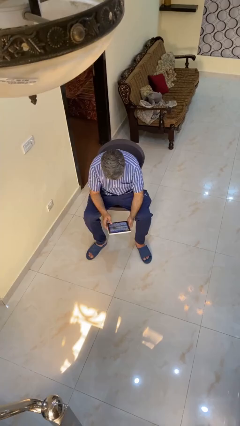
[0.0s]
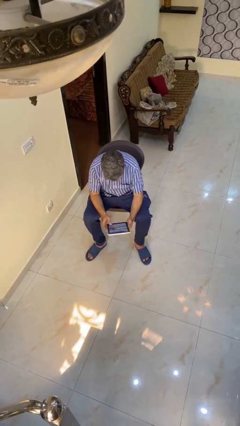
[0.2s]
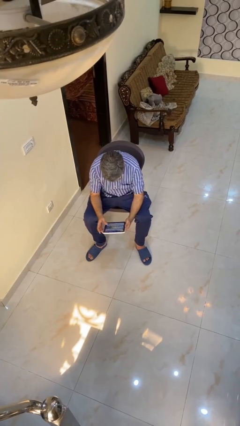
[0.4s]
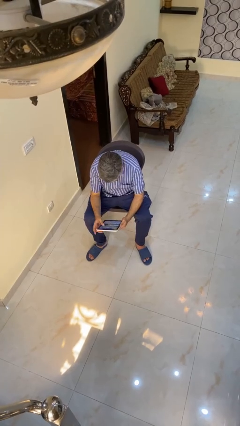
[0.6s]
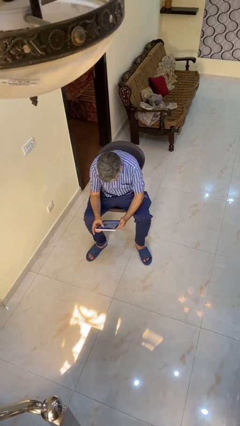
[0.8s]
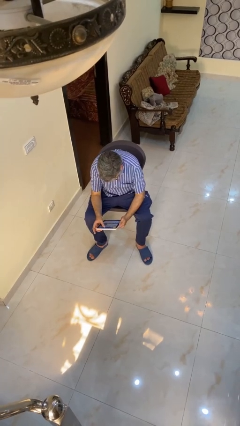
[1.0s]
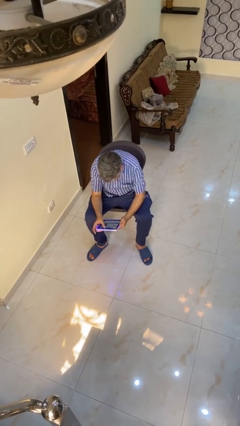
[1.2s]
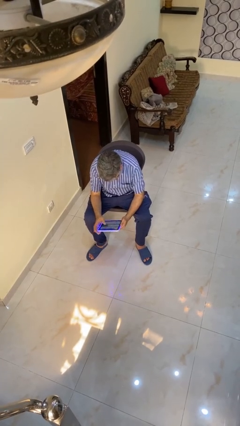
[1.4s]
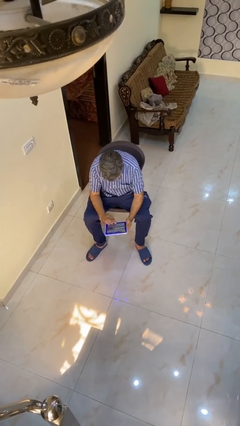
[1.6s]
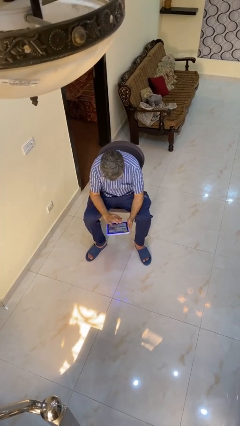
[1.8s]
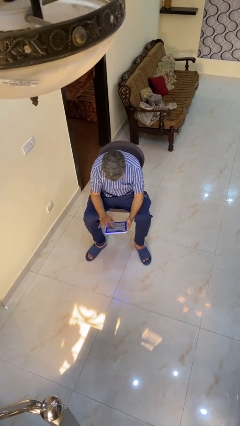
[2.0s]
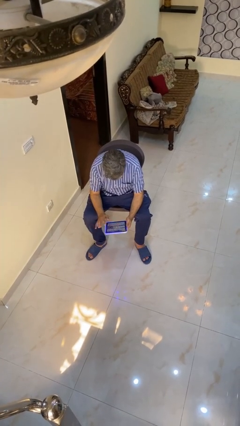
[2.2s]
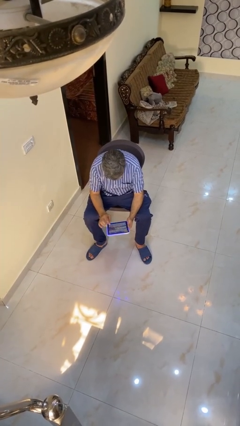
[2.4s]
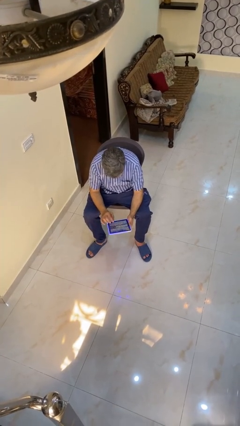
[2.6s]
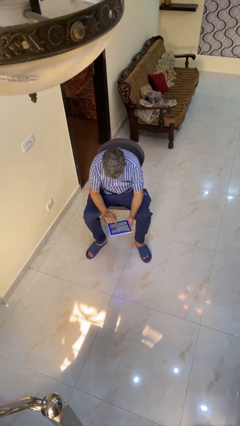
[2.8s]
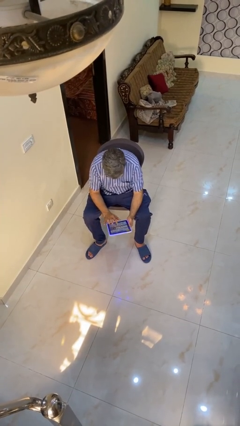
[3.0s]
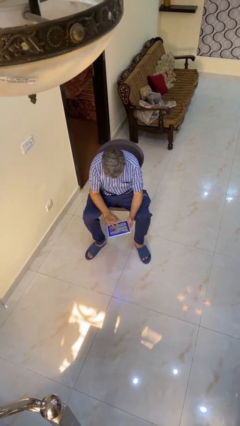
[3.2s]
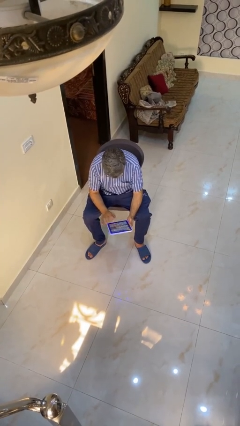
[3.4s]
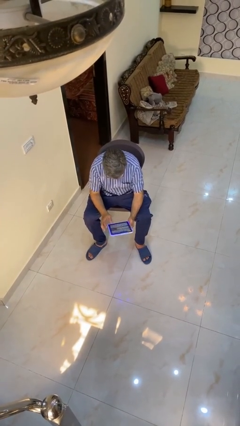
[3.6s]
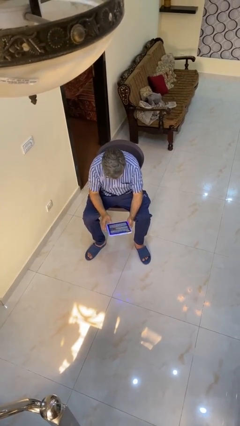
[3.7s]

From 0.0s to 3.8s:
person interacts with tablet

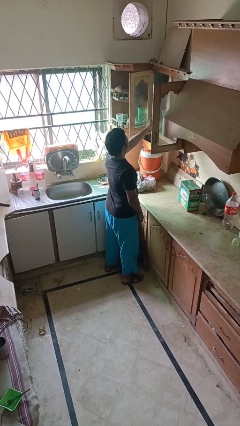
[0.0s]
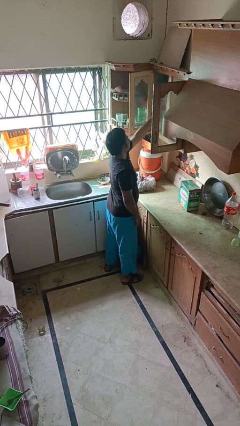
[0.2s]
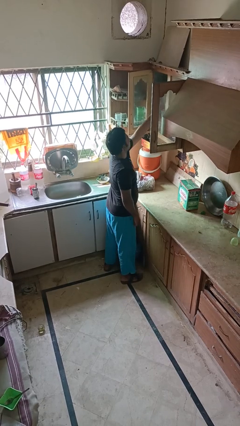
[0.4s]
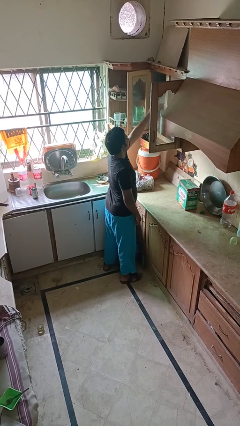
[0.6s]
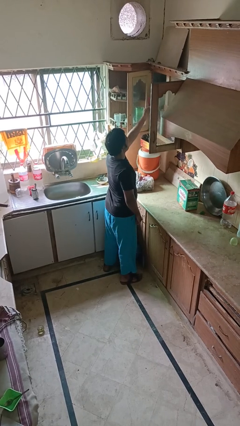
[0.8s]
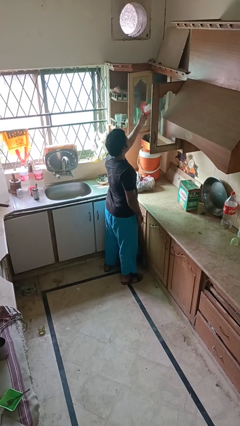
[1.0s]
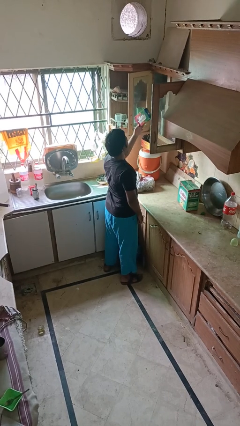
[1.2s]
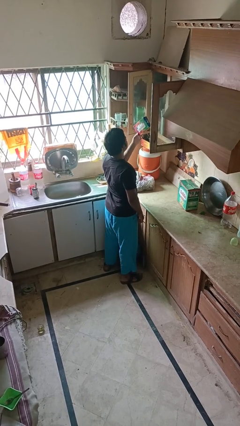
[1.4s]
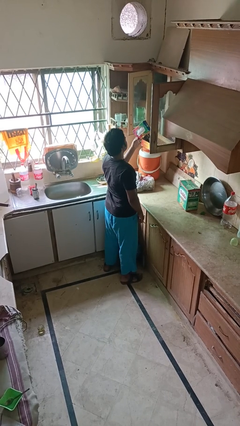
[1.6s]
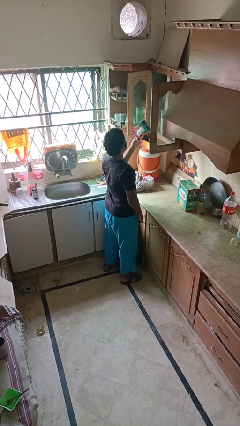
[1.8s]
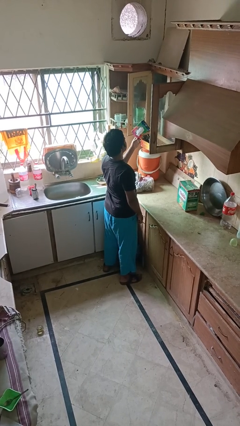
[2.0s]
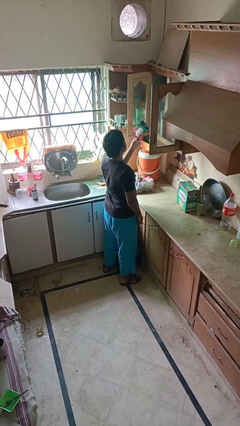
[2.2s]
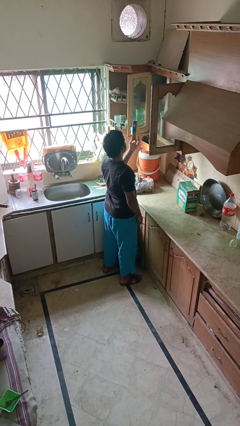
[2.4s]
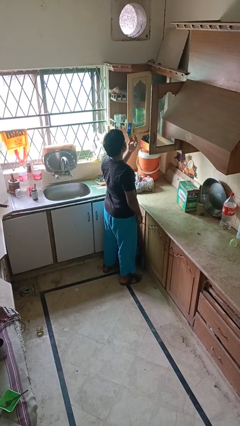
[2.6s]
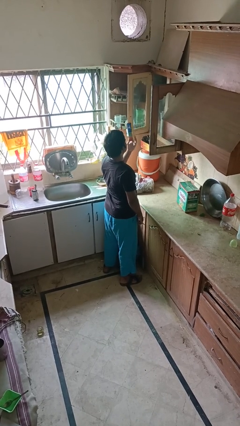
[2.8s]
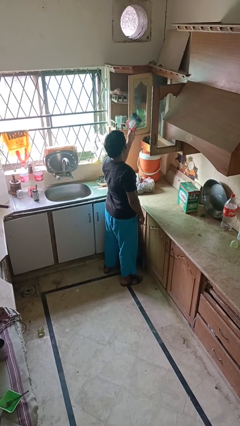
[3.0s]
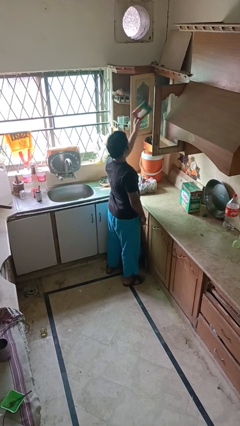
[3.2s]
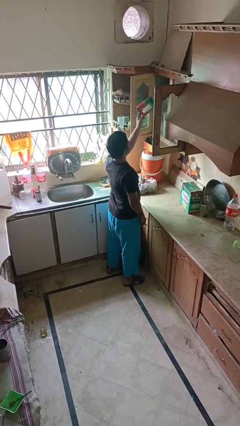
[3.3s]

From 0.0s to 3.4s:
person picks up object from cabinet

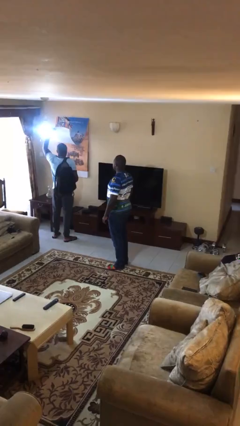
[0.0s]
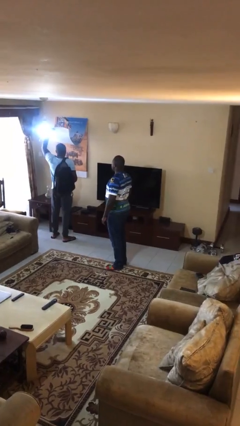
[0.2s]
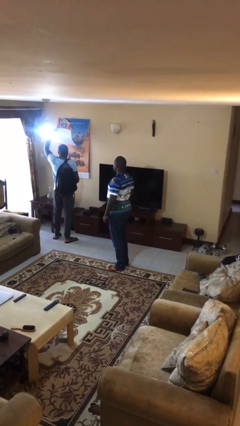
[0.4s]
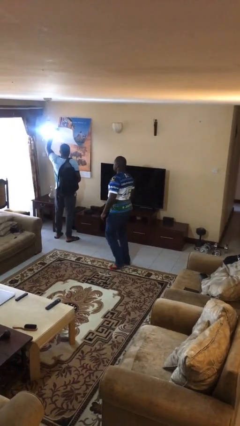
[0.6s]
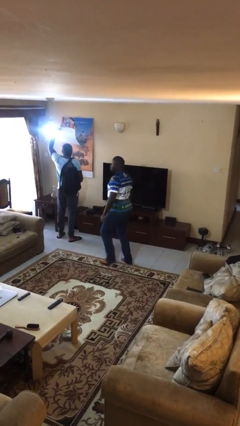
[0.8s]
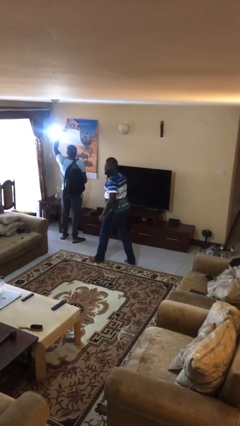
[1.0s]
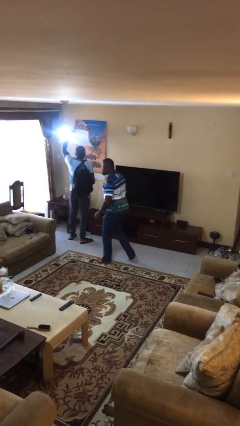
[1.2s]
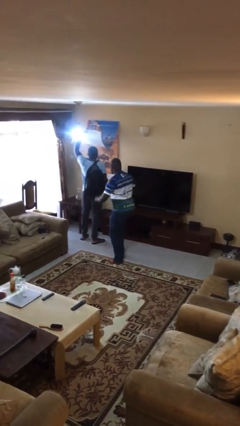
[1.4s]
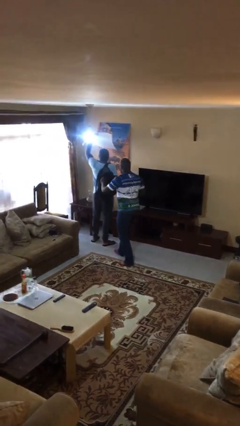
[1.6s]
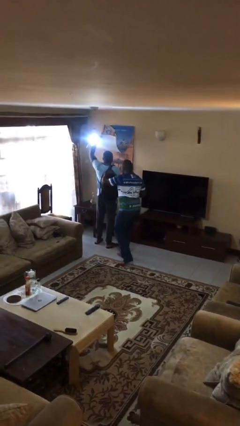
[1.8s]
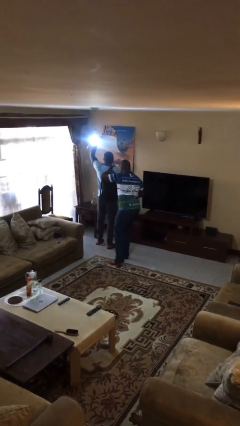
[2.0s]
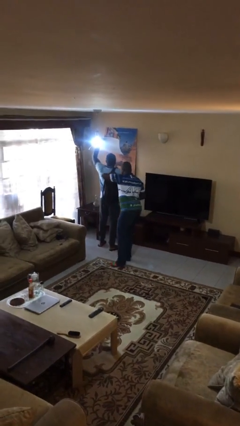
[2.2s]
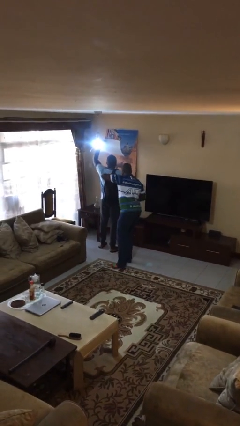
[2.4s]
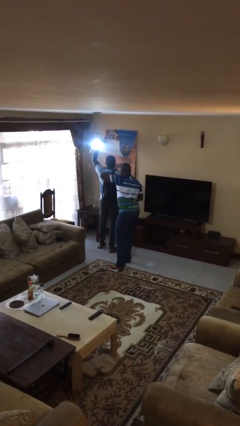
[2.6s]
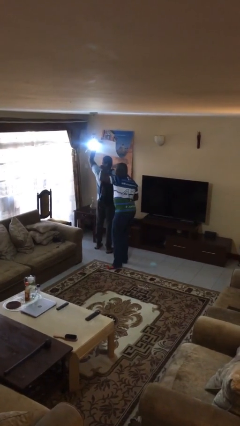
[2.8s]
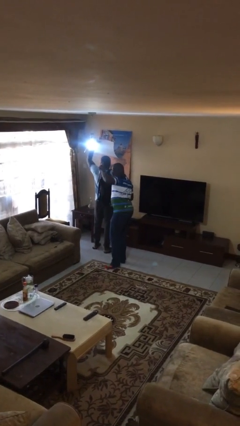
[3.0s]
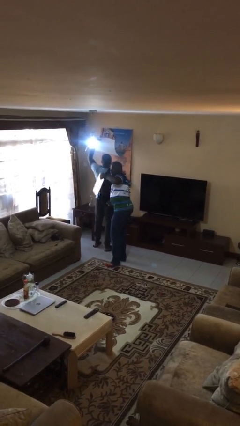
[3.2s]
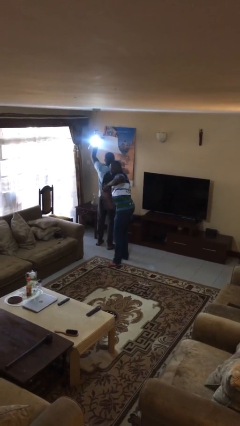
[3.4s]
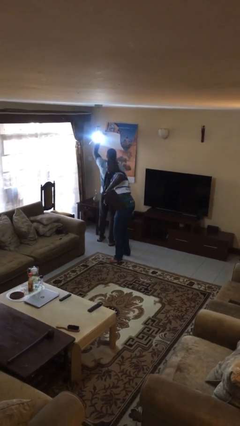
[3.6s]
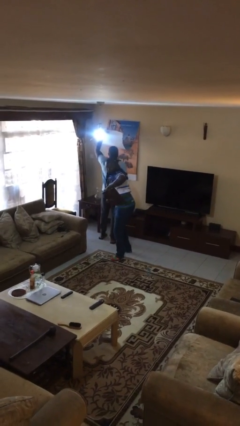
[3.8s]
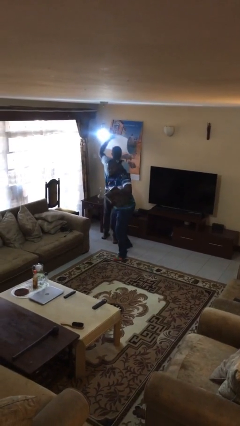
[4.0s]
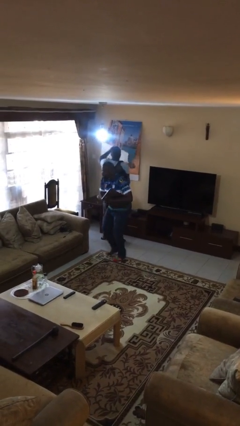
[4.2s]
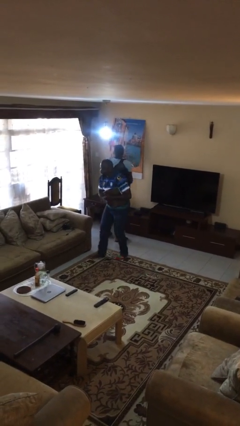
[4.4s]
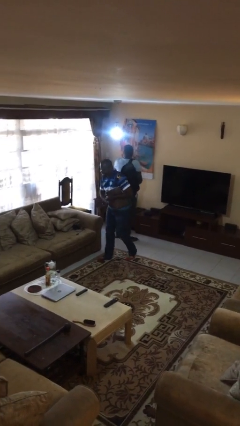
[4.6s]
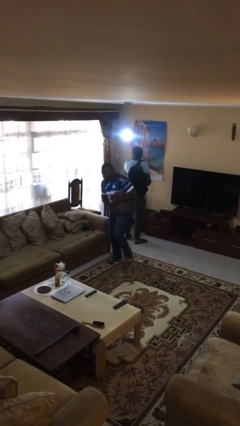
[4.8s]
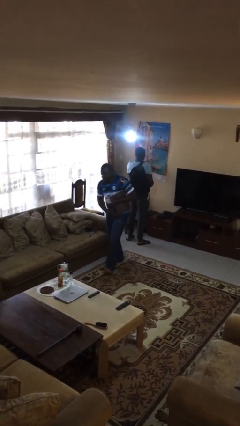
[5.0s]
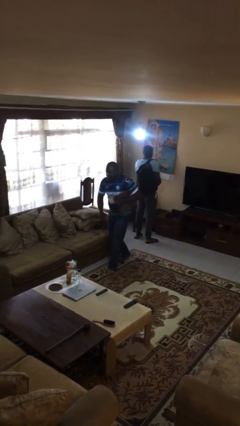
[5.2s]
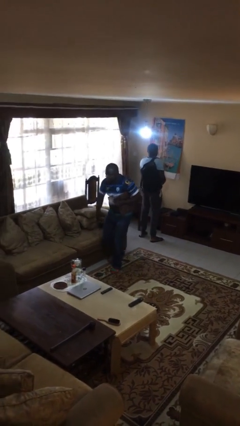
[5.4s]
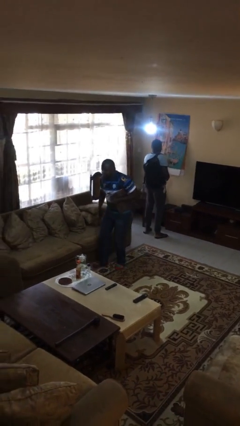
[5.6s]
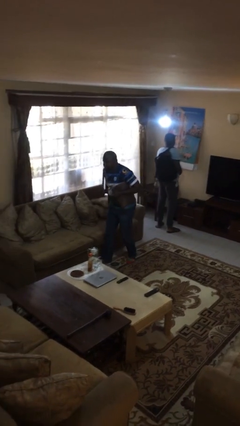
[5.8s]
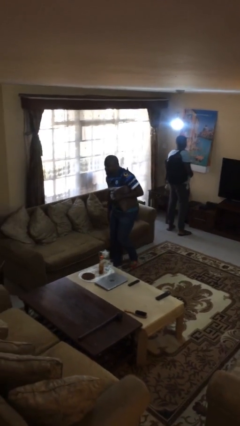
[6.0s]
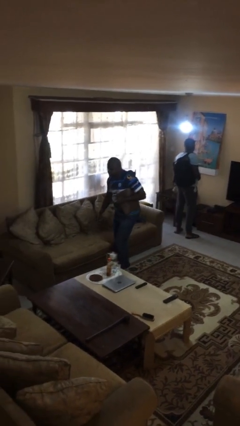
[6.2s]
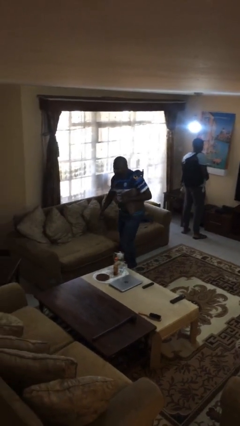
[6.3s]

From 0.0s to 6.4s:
person steals object from person

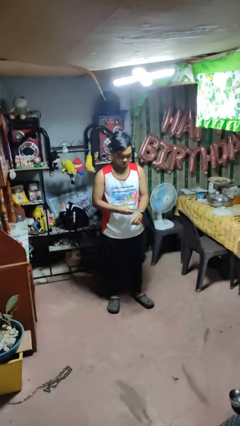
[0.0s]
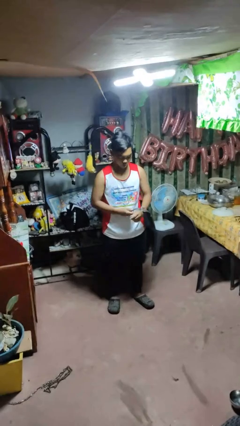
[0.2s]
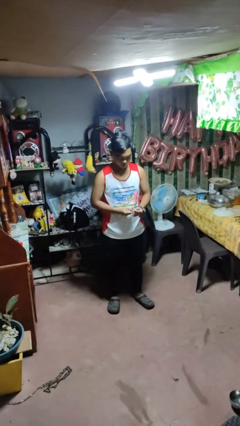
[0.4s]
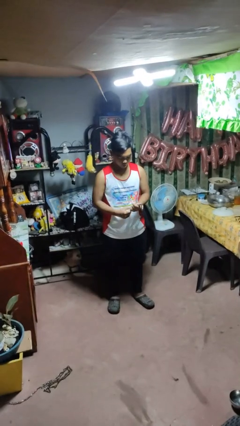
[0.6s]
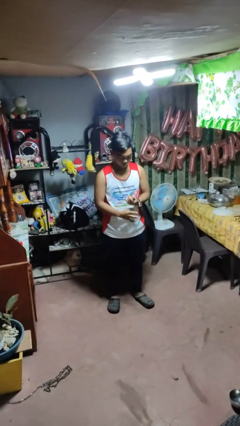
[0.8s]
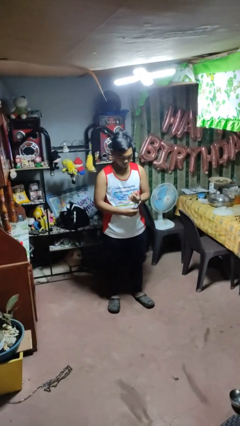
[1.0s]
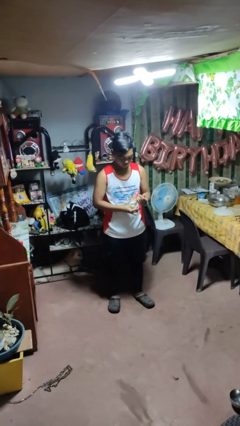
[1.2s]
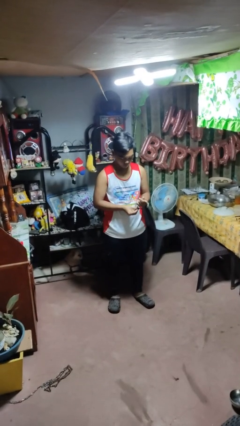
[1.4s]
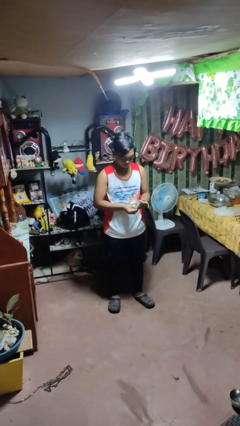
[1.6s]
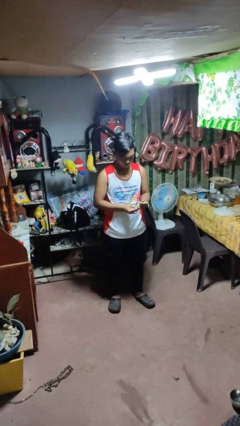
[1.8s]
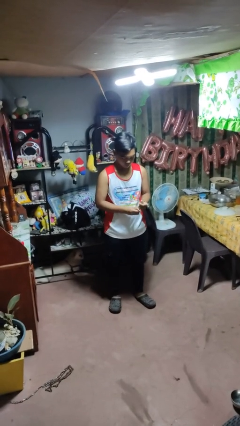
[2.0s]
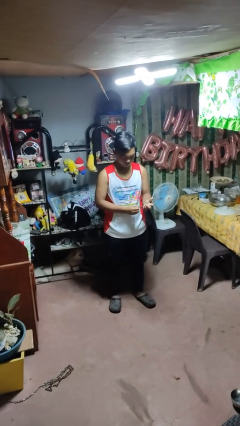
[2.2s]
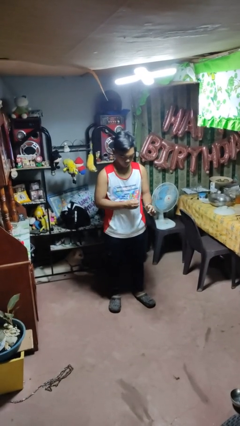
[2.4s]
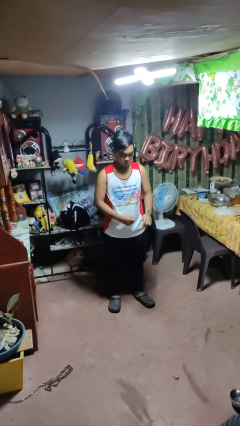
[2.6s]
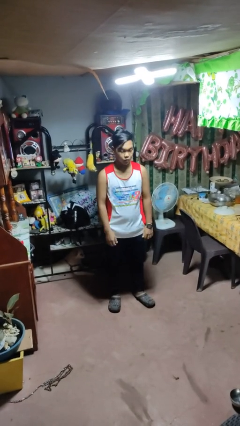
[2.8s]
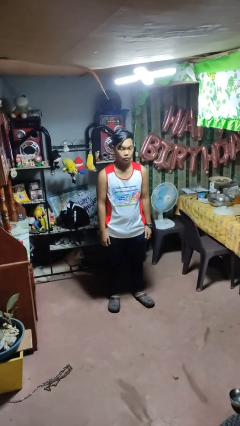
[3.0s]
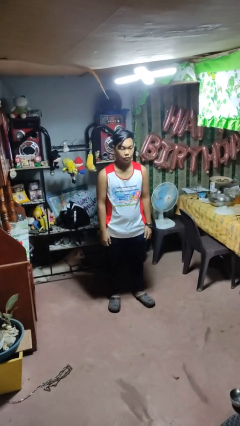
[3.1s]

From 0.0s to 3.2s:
person puts on wristwatch

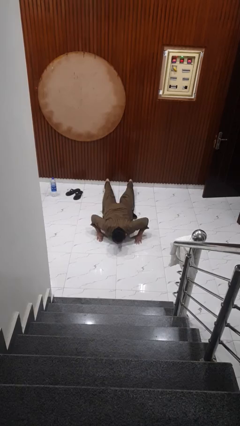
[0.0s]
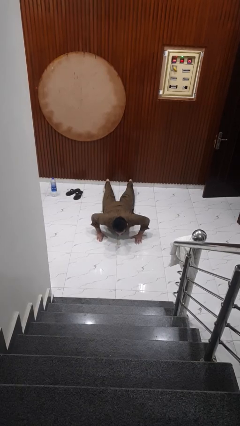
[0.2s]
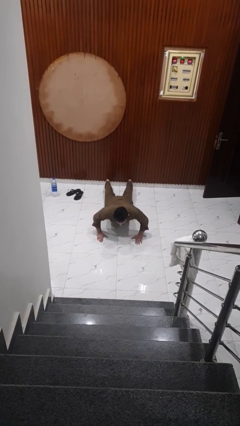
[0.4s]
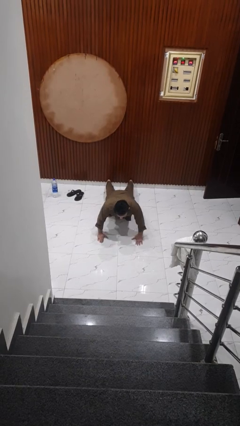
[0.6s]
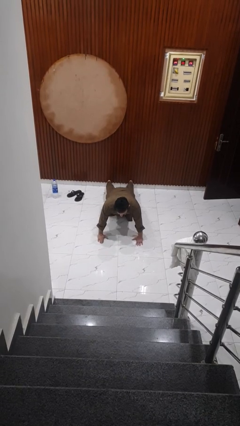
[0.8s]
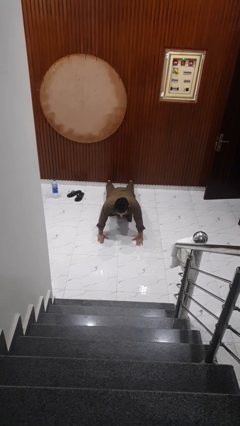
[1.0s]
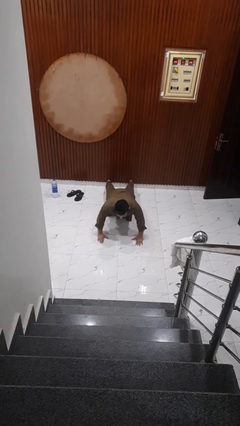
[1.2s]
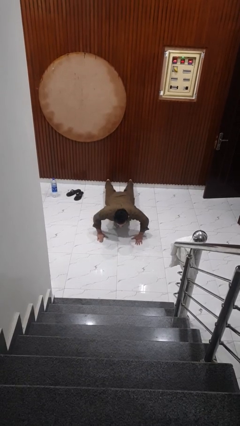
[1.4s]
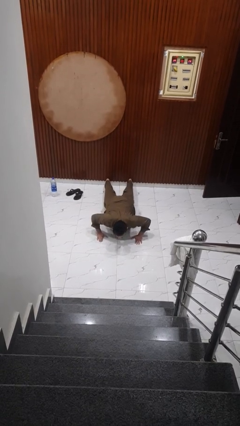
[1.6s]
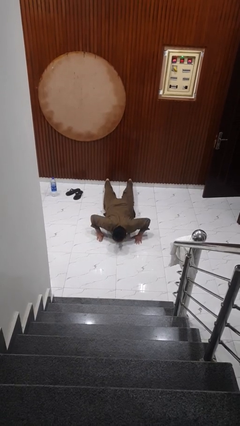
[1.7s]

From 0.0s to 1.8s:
person exercises with pushup
